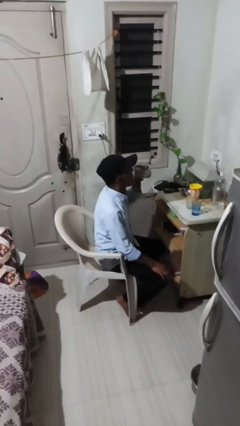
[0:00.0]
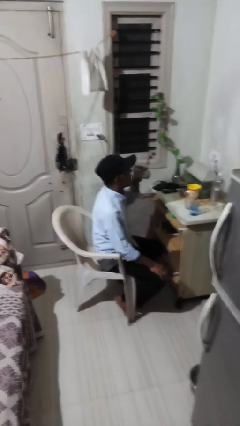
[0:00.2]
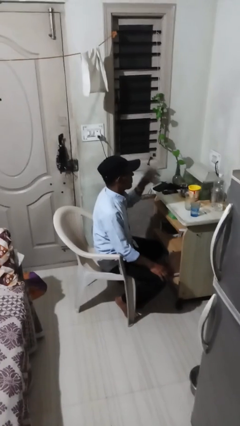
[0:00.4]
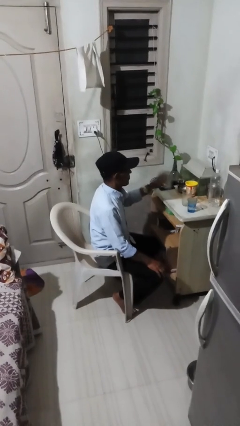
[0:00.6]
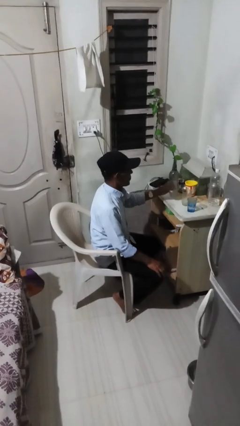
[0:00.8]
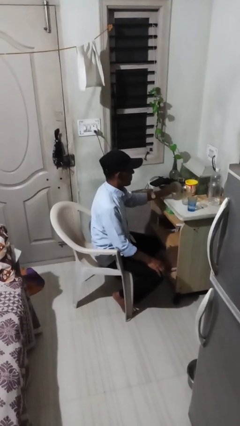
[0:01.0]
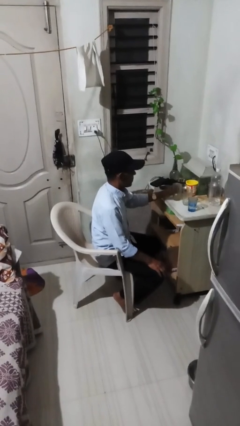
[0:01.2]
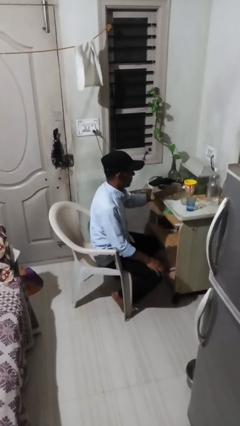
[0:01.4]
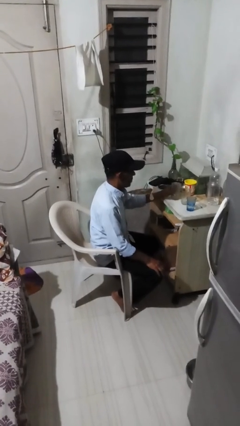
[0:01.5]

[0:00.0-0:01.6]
person puts down object on table

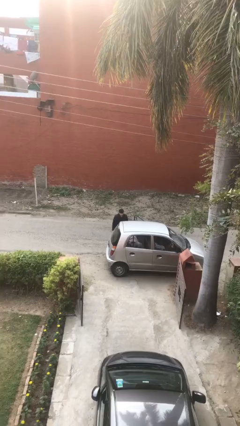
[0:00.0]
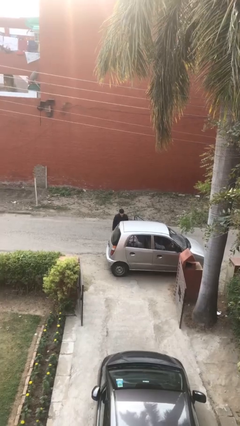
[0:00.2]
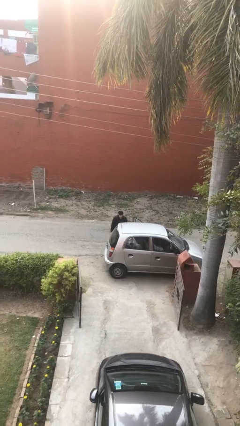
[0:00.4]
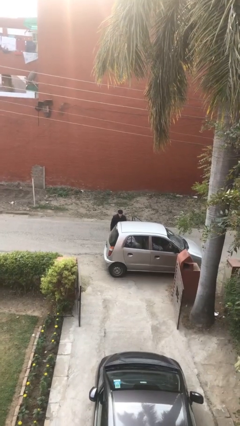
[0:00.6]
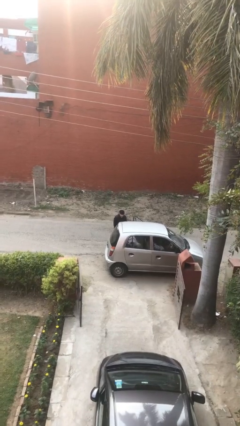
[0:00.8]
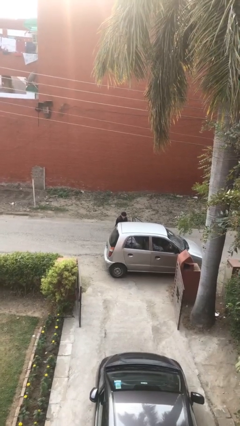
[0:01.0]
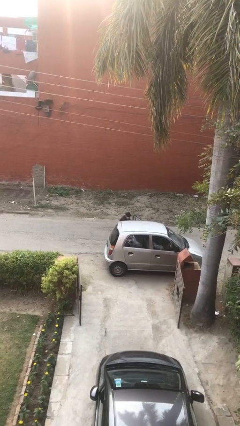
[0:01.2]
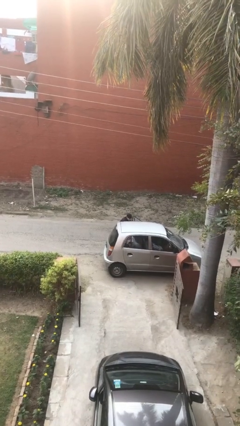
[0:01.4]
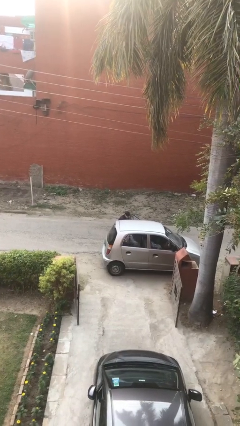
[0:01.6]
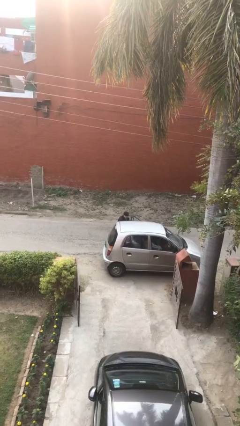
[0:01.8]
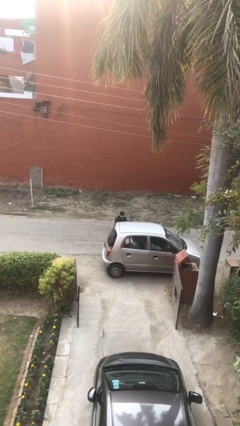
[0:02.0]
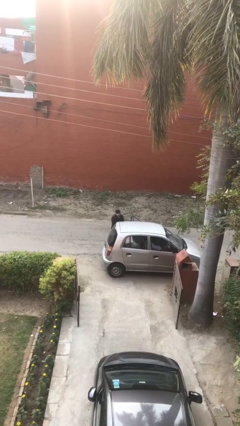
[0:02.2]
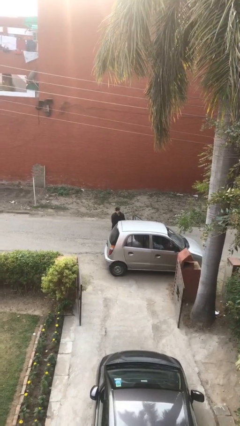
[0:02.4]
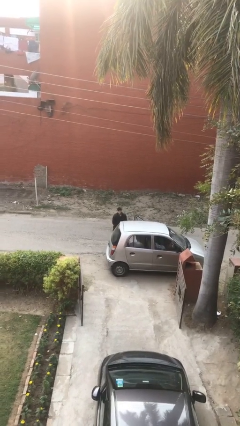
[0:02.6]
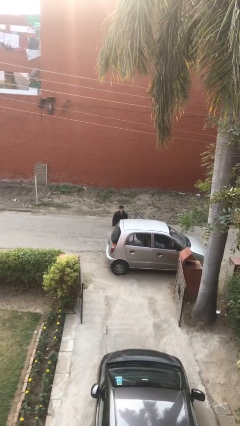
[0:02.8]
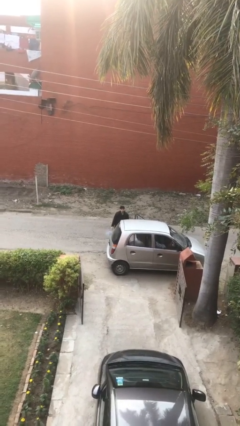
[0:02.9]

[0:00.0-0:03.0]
person unloads car

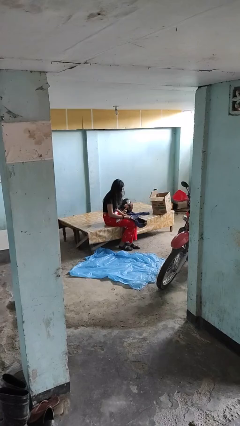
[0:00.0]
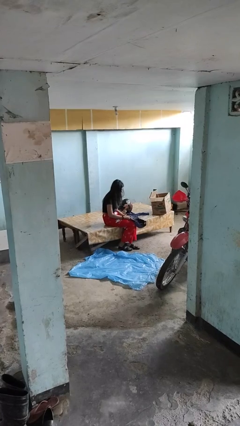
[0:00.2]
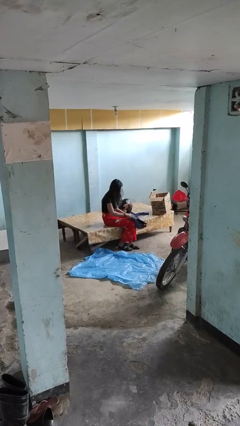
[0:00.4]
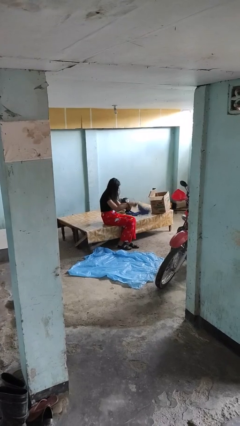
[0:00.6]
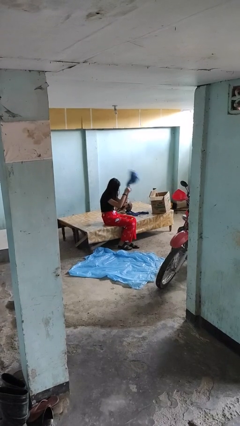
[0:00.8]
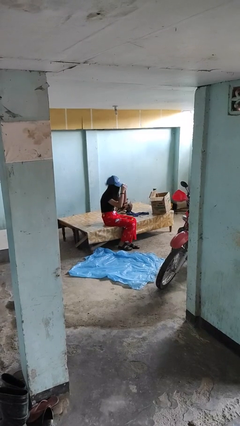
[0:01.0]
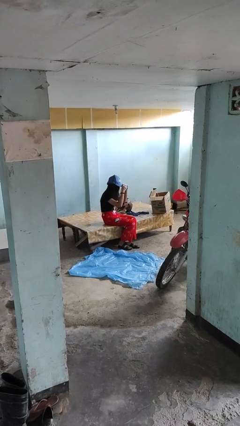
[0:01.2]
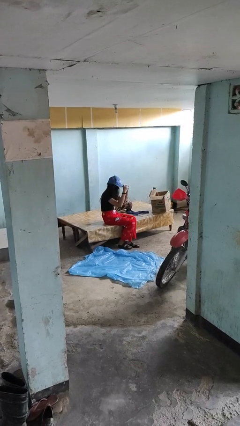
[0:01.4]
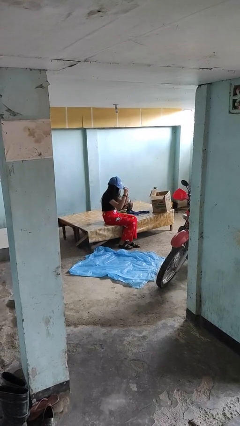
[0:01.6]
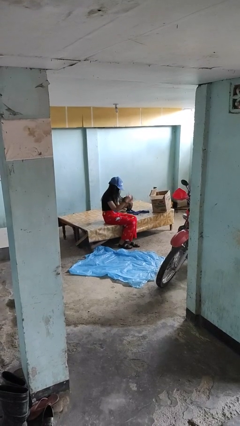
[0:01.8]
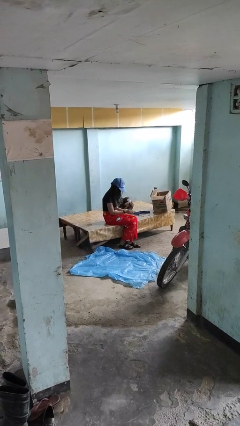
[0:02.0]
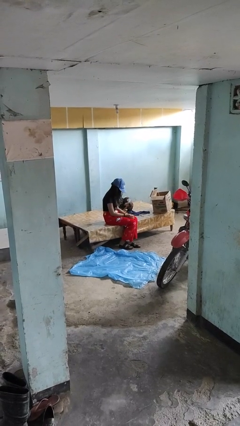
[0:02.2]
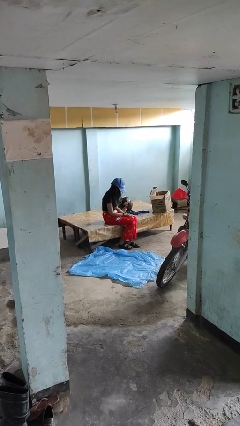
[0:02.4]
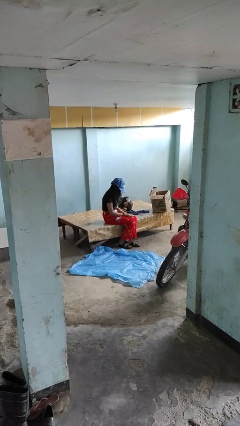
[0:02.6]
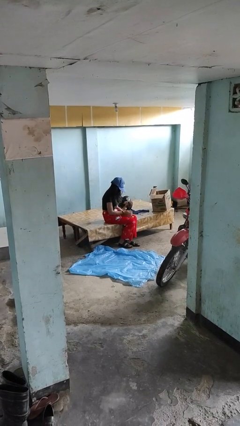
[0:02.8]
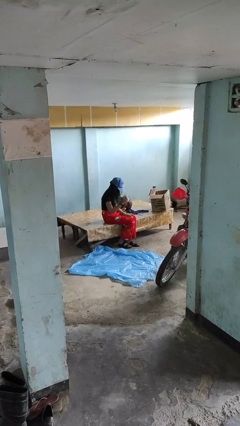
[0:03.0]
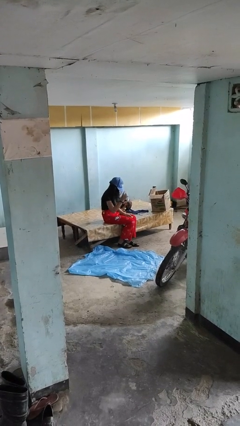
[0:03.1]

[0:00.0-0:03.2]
person puts on hat

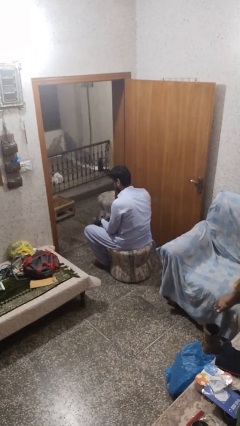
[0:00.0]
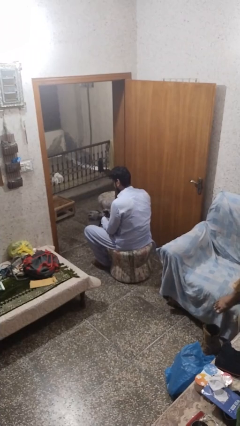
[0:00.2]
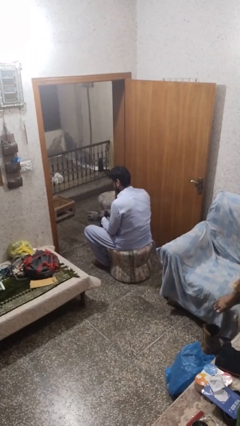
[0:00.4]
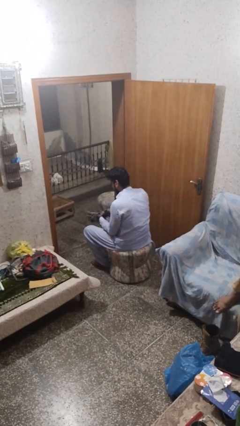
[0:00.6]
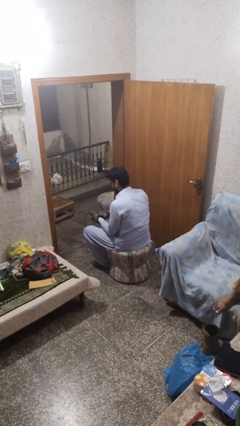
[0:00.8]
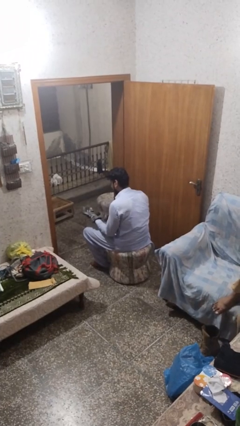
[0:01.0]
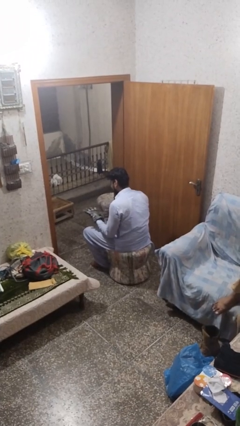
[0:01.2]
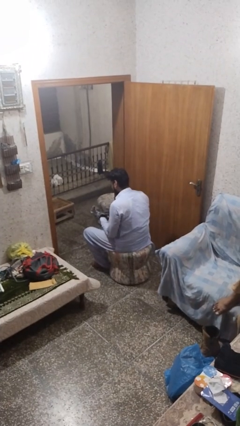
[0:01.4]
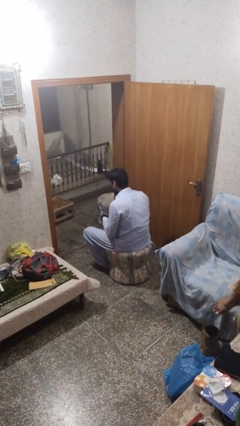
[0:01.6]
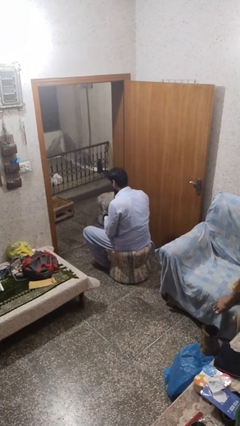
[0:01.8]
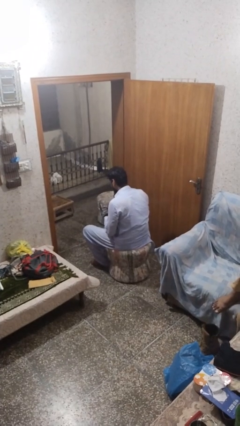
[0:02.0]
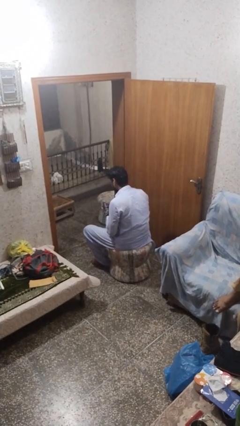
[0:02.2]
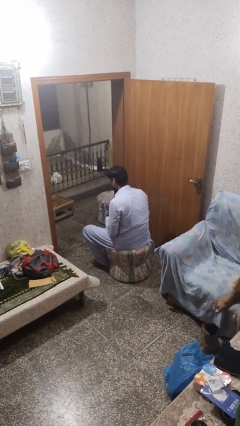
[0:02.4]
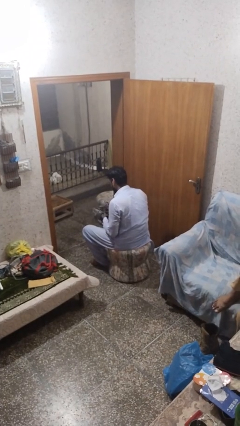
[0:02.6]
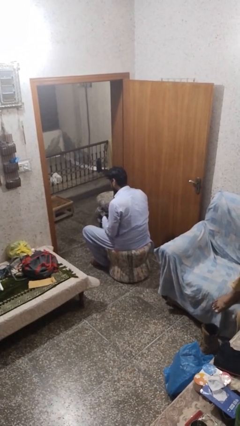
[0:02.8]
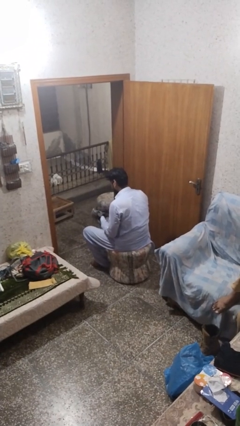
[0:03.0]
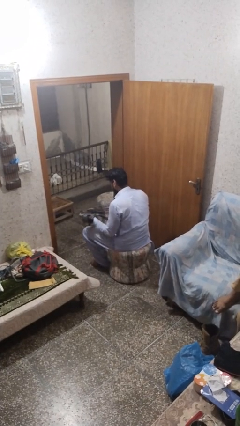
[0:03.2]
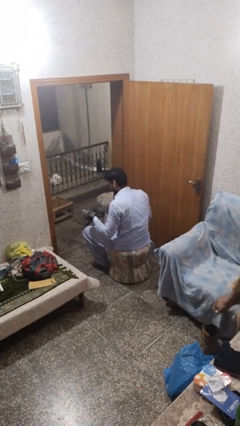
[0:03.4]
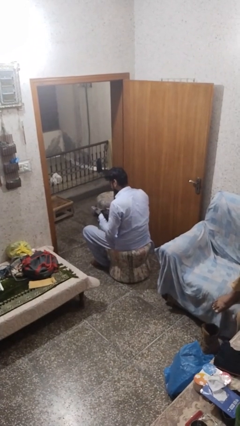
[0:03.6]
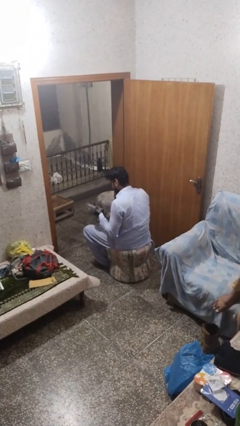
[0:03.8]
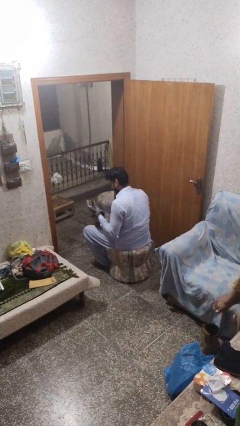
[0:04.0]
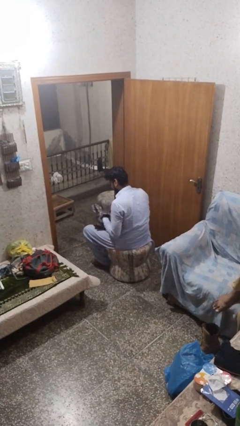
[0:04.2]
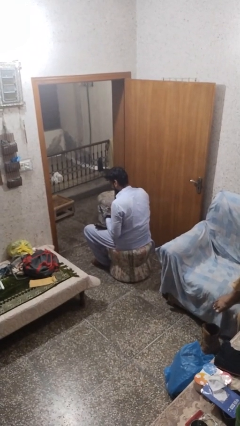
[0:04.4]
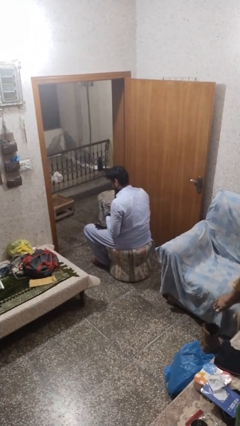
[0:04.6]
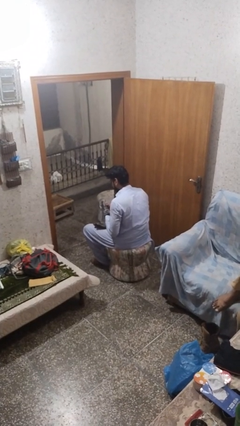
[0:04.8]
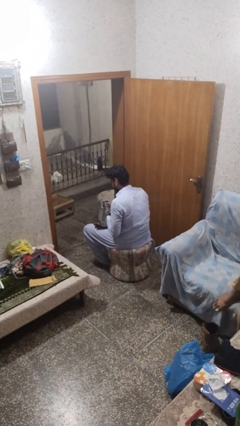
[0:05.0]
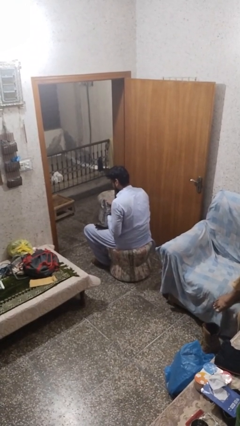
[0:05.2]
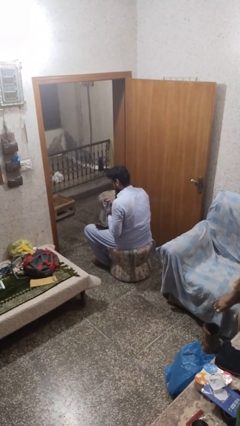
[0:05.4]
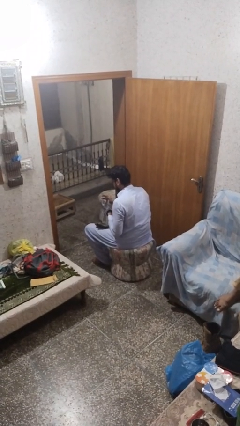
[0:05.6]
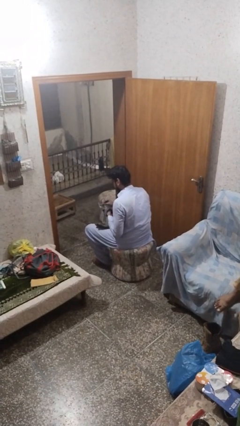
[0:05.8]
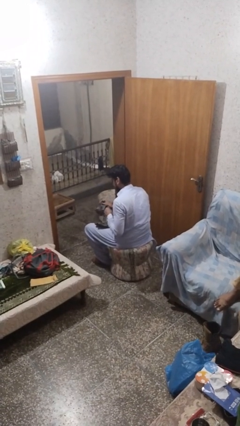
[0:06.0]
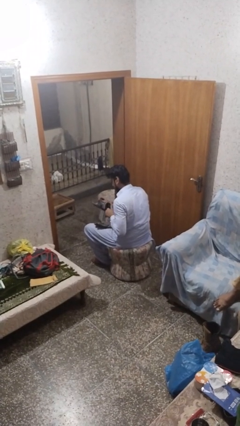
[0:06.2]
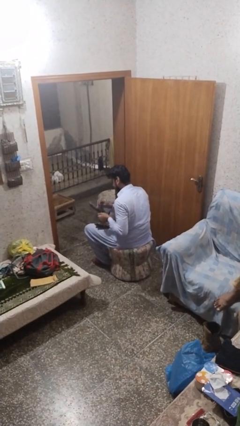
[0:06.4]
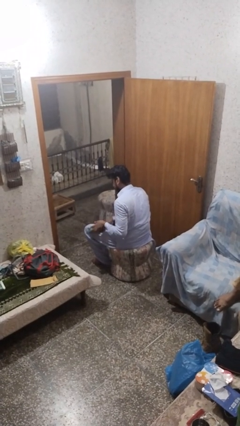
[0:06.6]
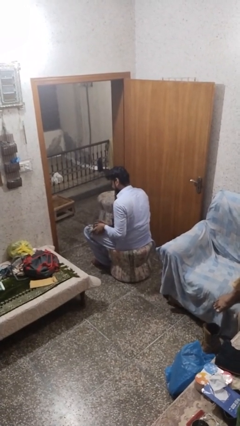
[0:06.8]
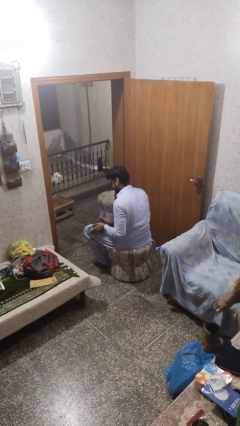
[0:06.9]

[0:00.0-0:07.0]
person takes off gloves

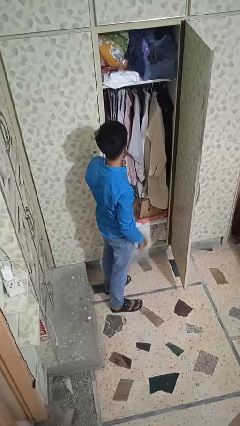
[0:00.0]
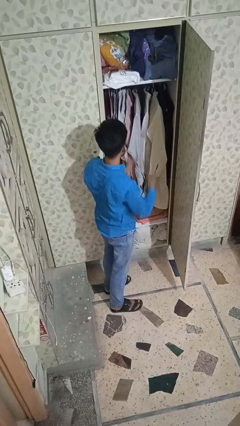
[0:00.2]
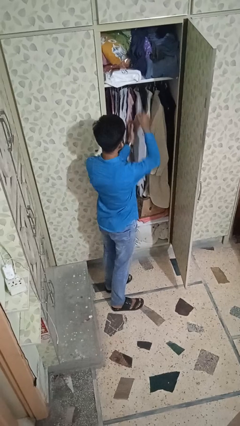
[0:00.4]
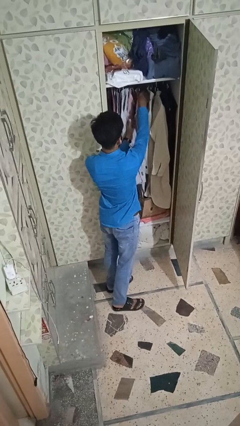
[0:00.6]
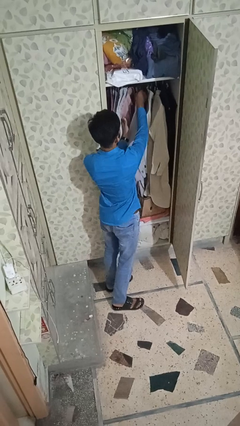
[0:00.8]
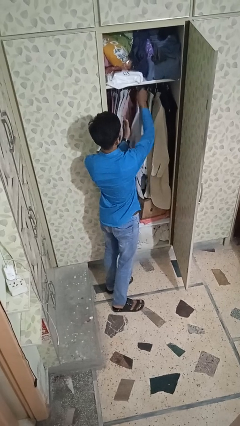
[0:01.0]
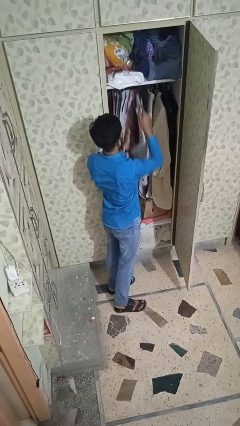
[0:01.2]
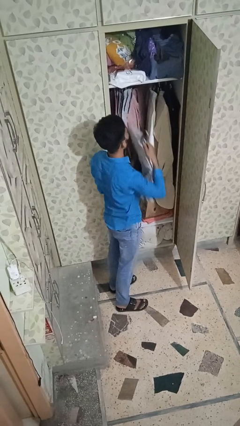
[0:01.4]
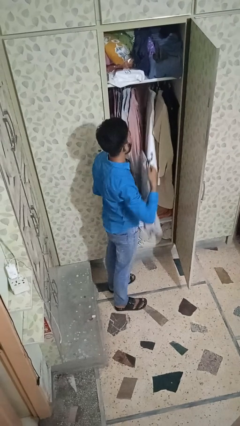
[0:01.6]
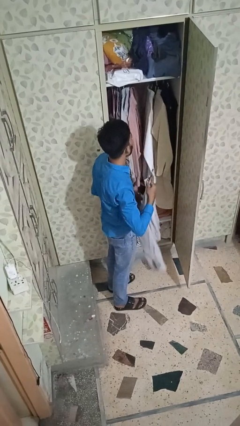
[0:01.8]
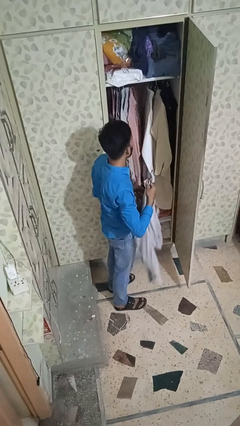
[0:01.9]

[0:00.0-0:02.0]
person takes clothes from closet

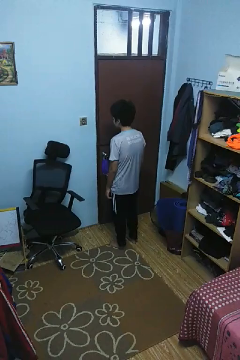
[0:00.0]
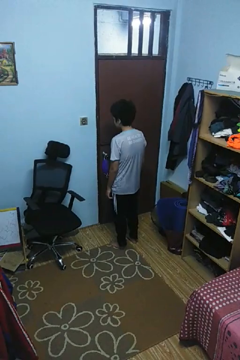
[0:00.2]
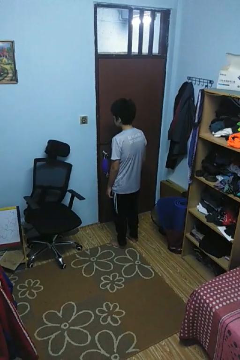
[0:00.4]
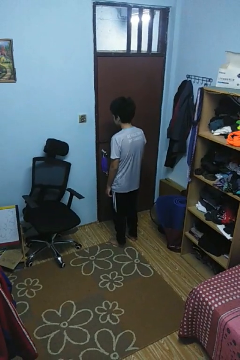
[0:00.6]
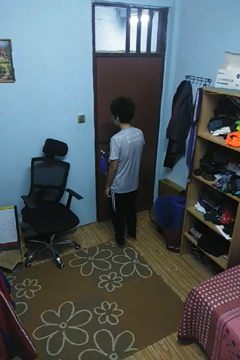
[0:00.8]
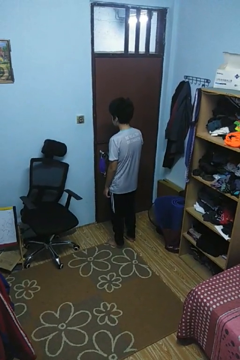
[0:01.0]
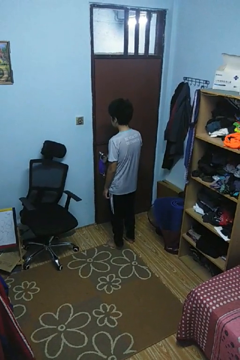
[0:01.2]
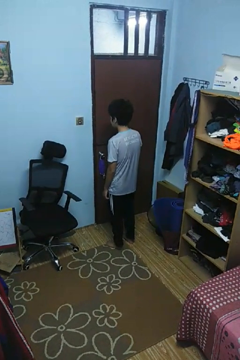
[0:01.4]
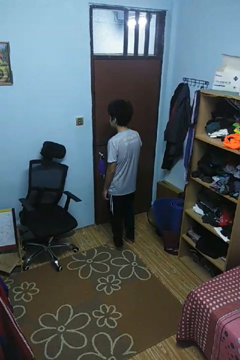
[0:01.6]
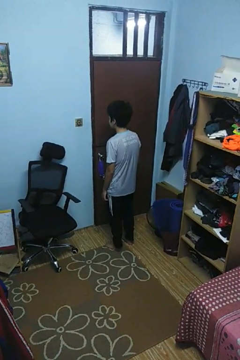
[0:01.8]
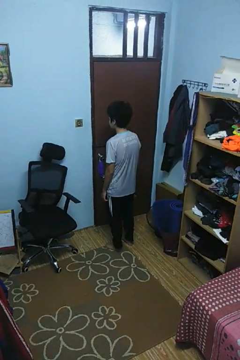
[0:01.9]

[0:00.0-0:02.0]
person unlocks door with keys
